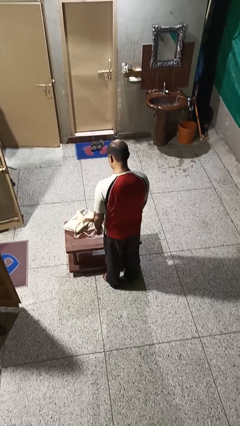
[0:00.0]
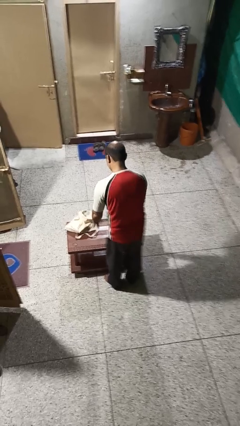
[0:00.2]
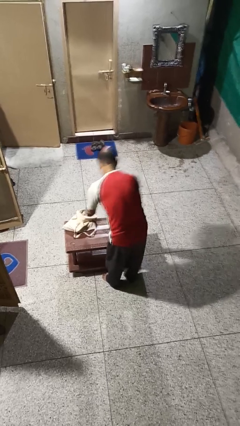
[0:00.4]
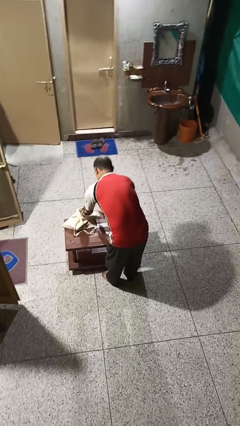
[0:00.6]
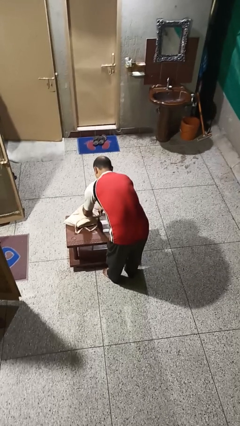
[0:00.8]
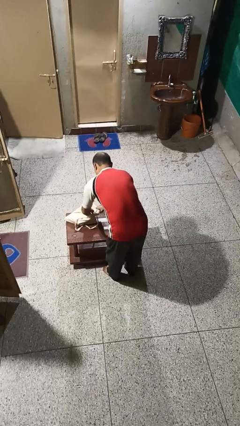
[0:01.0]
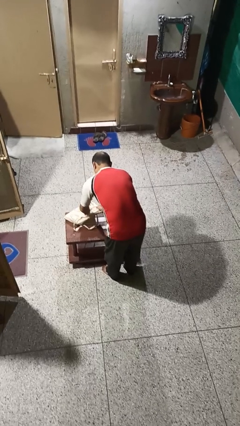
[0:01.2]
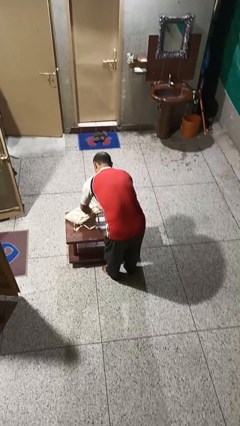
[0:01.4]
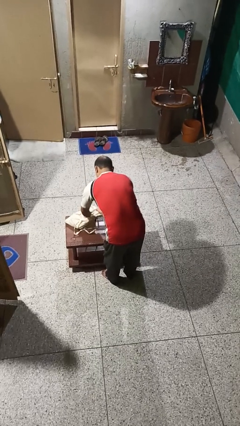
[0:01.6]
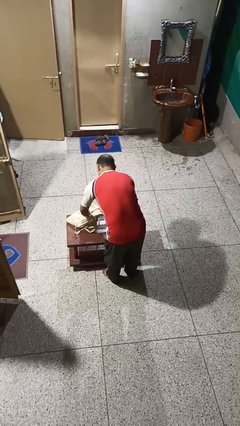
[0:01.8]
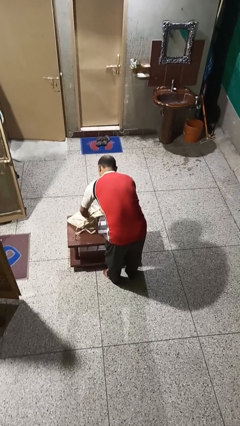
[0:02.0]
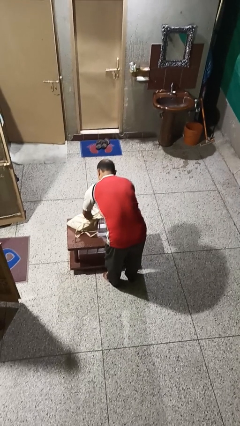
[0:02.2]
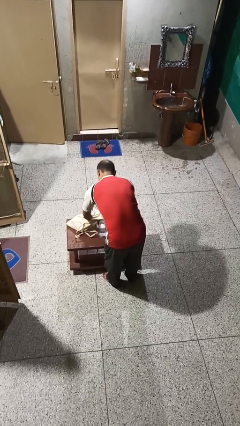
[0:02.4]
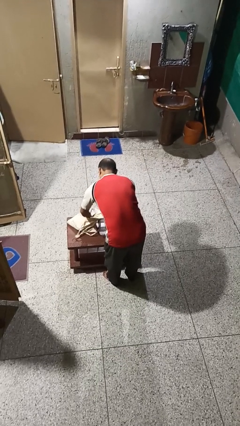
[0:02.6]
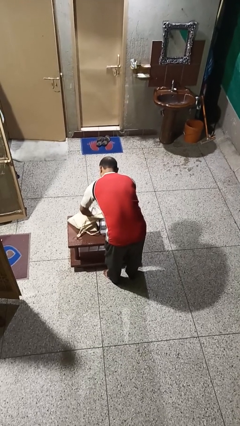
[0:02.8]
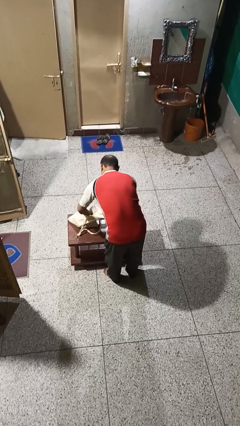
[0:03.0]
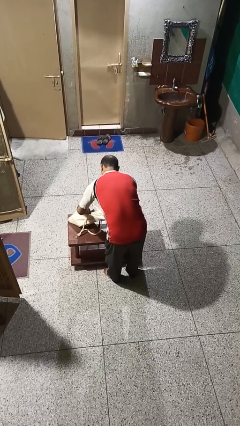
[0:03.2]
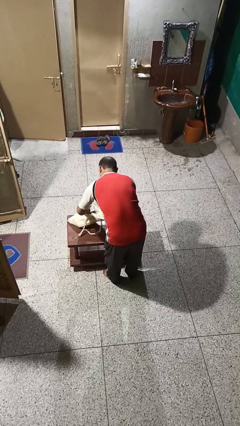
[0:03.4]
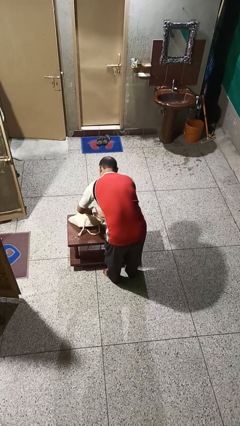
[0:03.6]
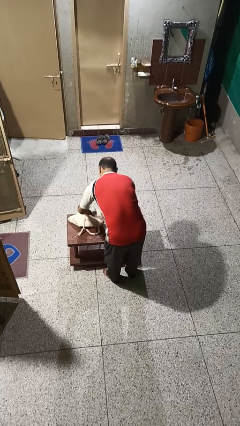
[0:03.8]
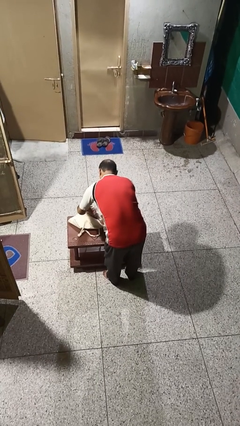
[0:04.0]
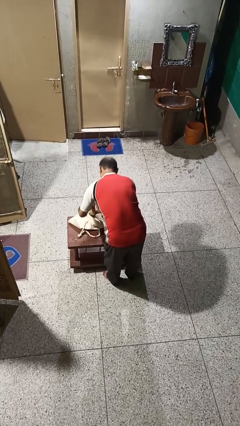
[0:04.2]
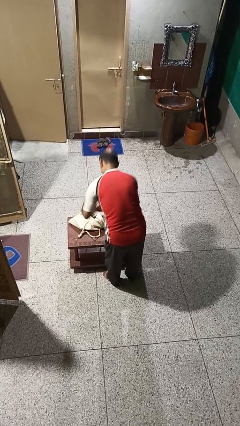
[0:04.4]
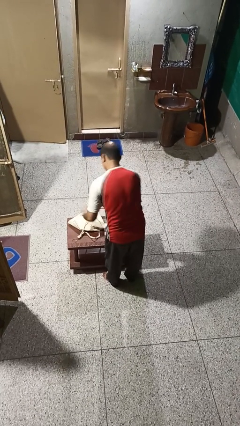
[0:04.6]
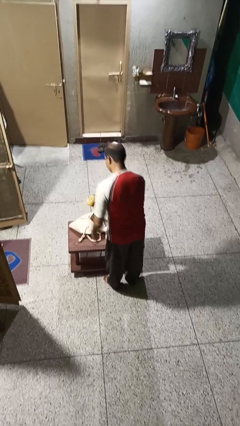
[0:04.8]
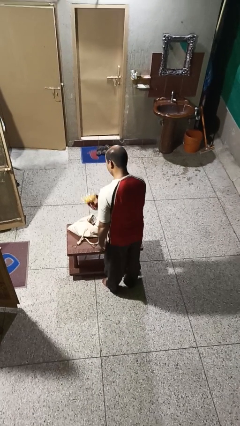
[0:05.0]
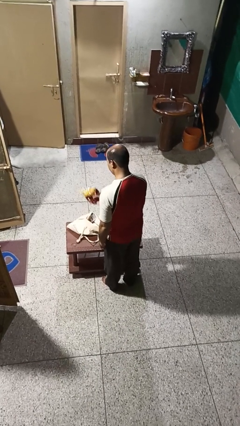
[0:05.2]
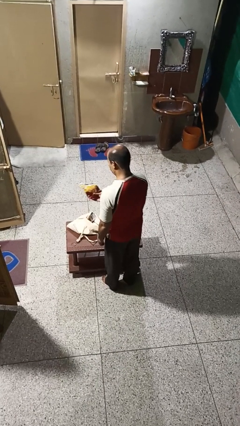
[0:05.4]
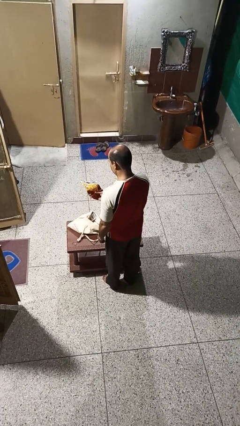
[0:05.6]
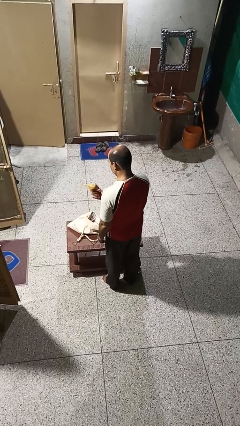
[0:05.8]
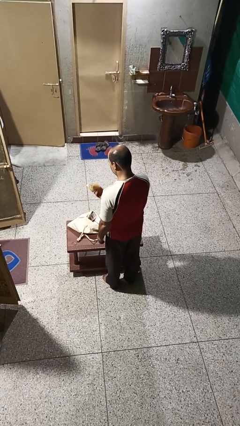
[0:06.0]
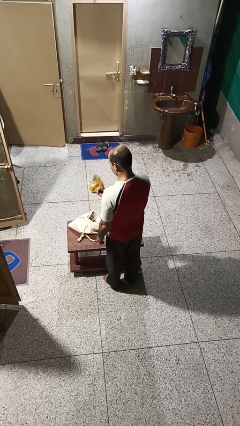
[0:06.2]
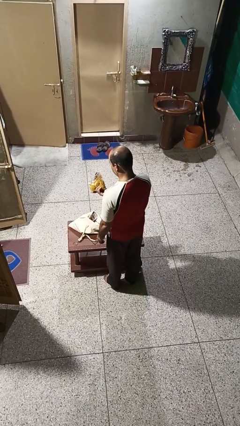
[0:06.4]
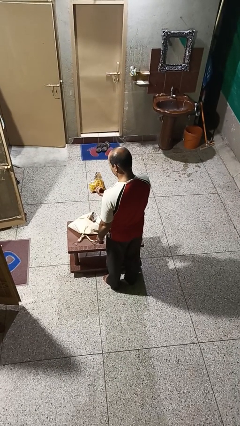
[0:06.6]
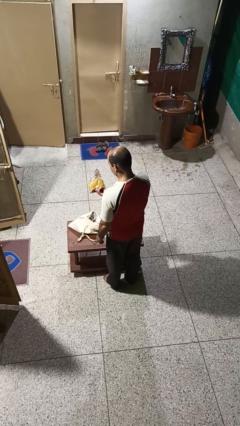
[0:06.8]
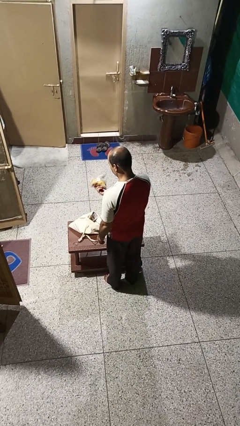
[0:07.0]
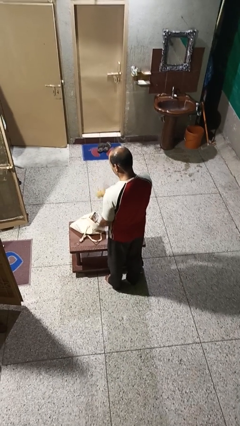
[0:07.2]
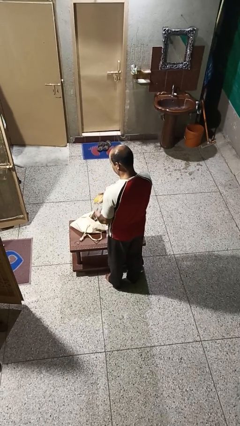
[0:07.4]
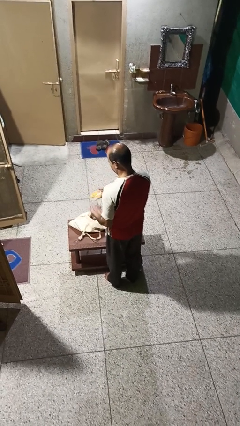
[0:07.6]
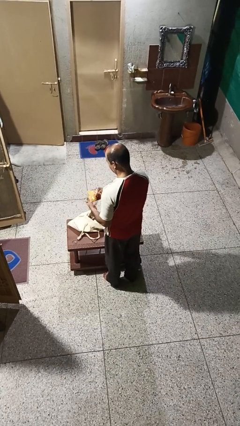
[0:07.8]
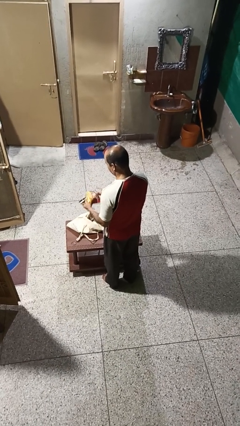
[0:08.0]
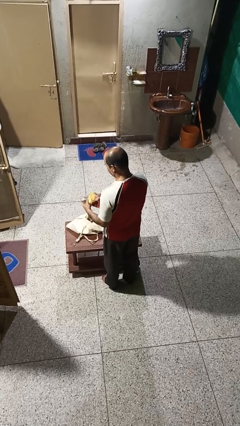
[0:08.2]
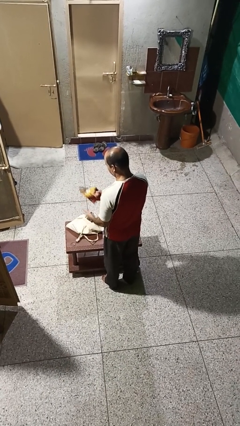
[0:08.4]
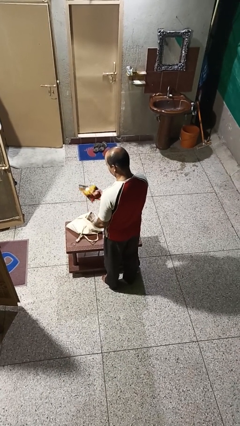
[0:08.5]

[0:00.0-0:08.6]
person takes object from bag

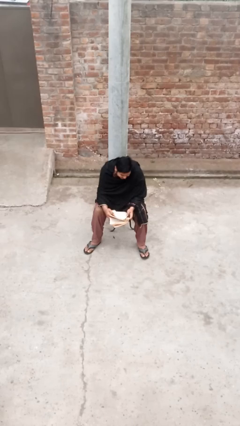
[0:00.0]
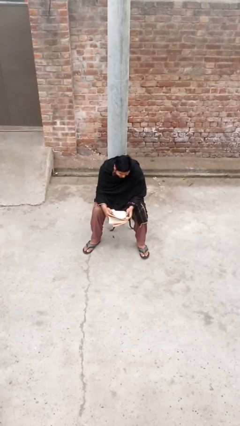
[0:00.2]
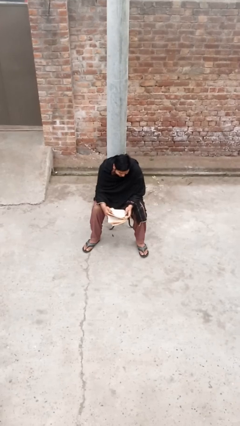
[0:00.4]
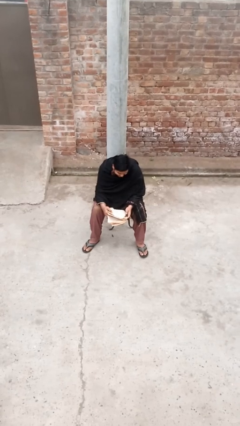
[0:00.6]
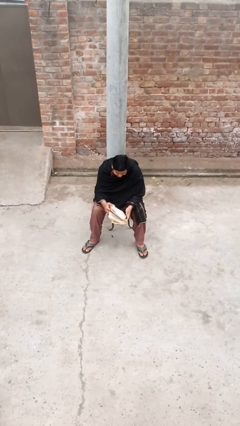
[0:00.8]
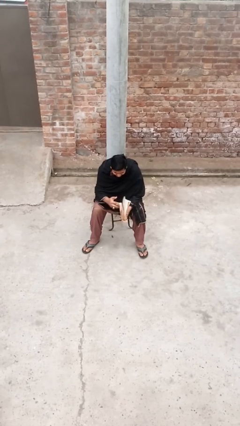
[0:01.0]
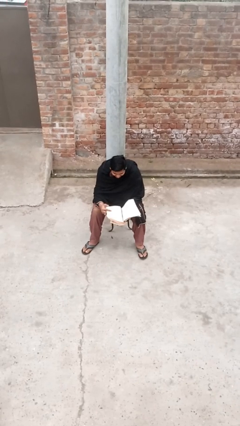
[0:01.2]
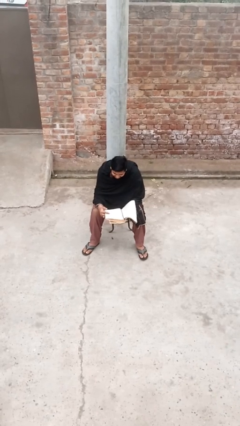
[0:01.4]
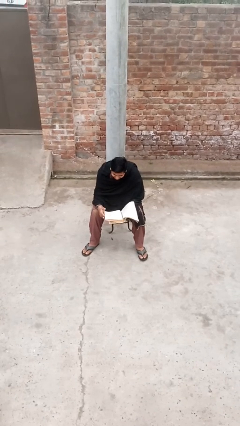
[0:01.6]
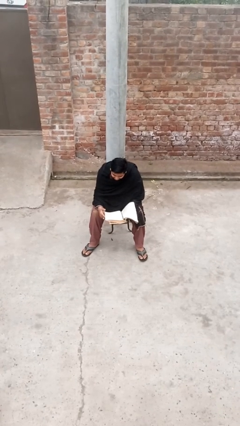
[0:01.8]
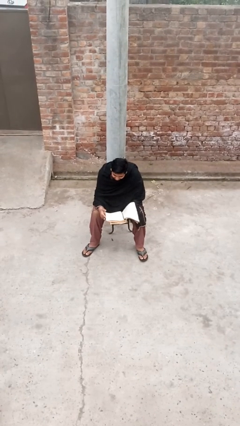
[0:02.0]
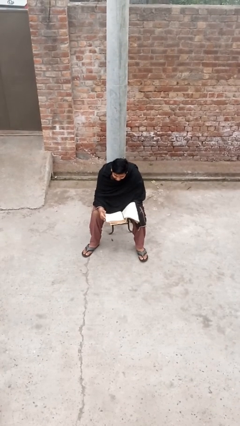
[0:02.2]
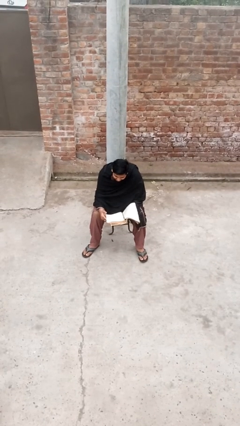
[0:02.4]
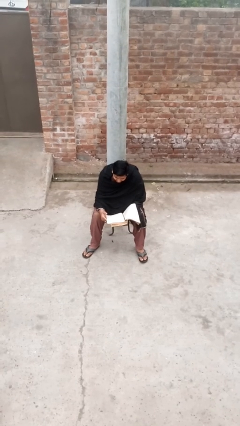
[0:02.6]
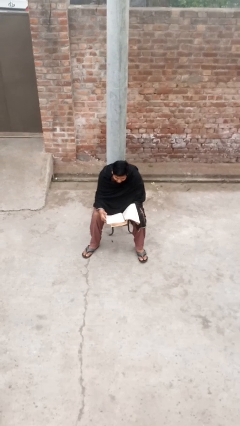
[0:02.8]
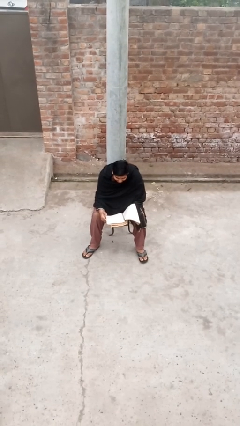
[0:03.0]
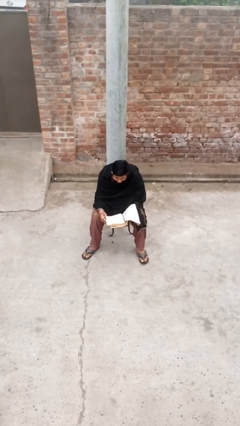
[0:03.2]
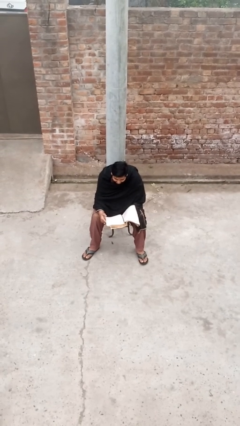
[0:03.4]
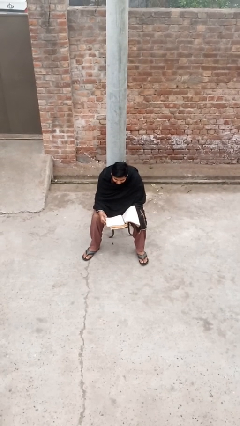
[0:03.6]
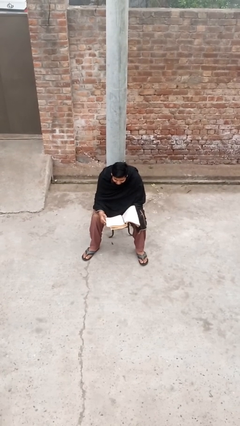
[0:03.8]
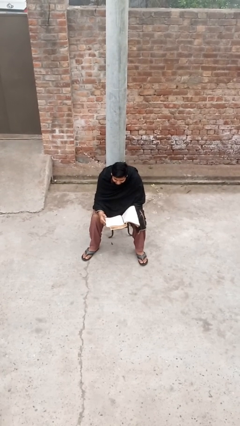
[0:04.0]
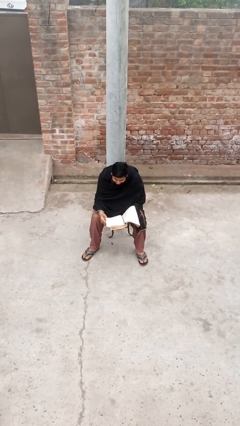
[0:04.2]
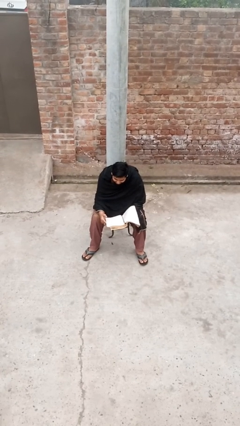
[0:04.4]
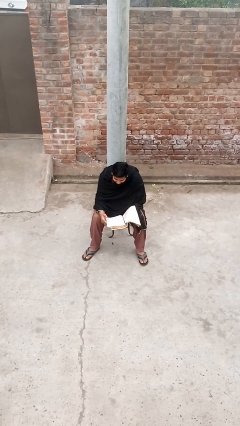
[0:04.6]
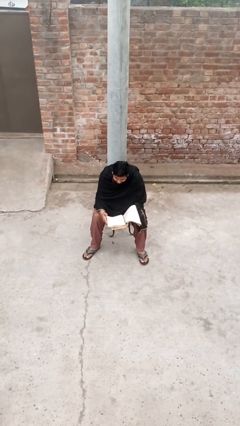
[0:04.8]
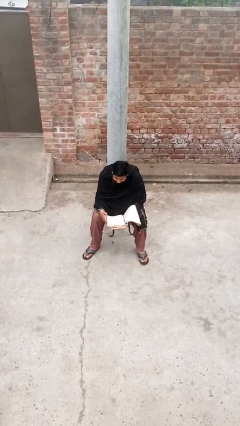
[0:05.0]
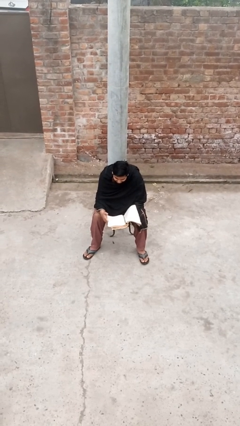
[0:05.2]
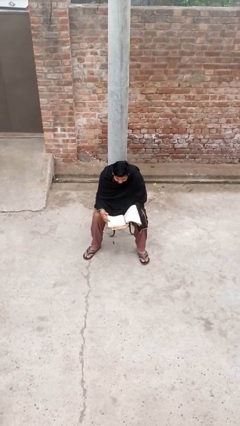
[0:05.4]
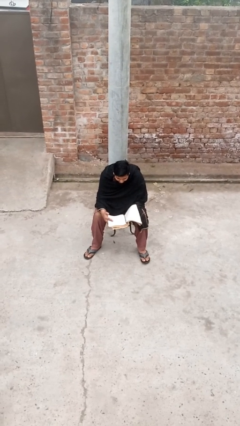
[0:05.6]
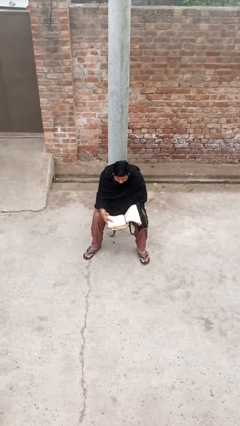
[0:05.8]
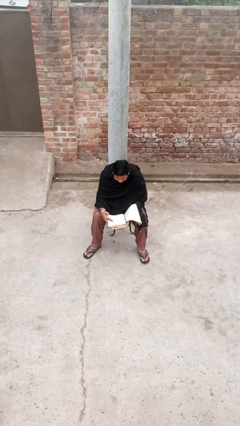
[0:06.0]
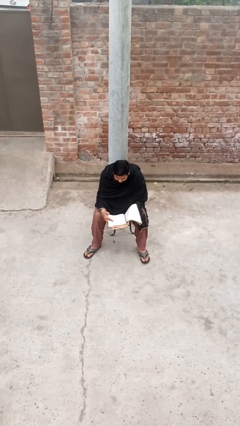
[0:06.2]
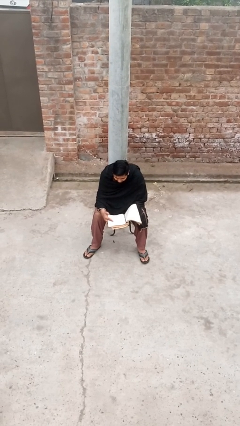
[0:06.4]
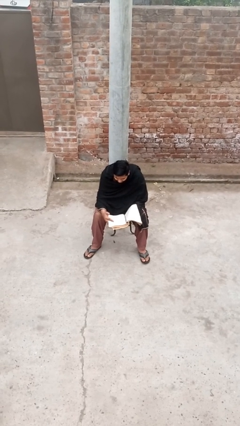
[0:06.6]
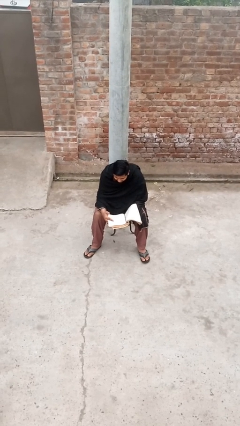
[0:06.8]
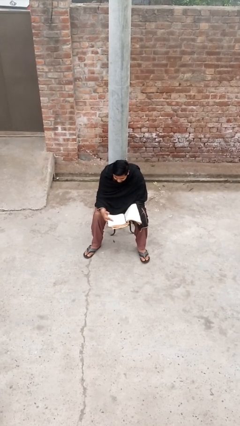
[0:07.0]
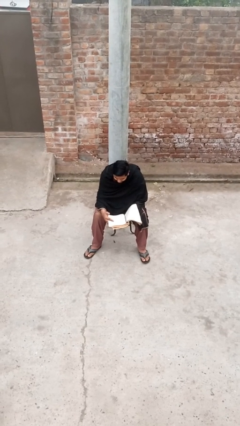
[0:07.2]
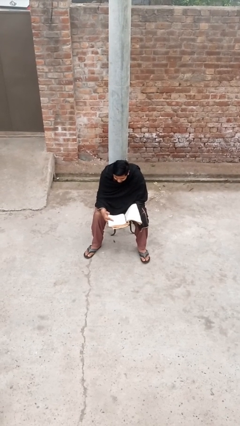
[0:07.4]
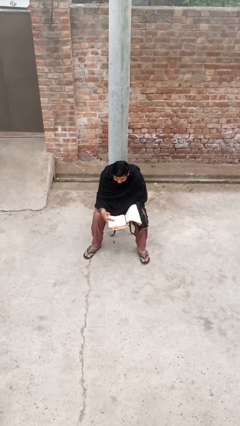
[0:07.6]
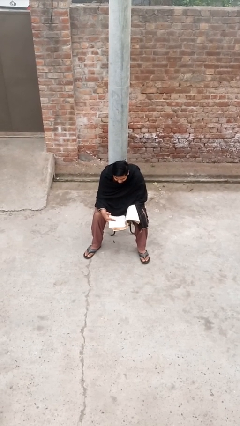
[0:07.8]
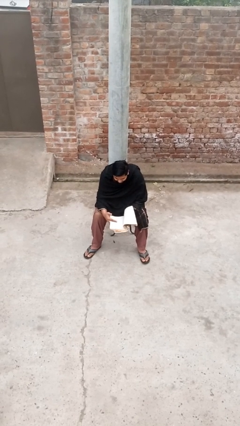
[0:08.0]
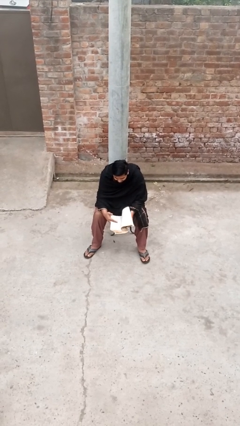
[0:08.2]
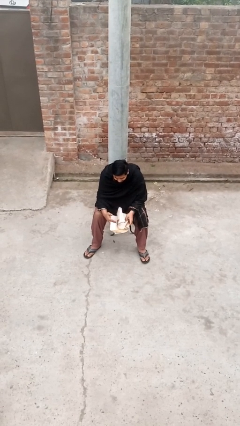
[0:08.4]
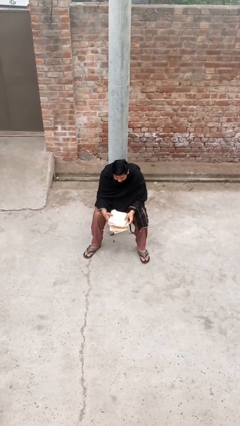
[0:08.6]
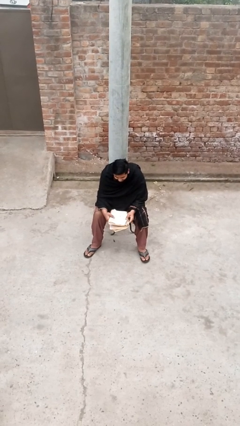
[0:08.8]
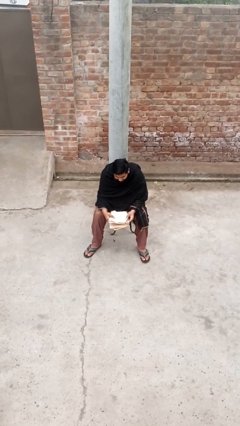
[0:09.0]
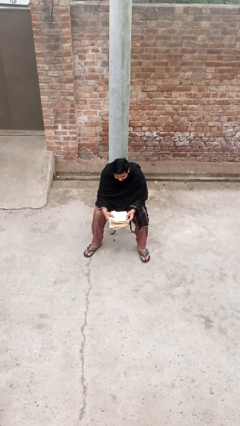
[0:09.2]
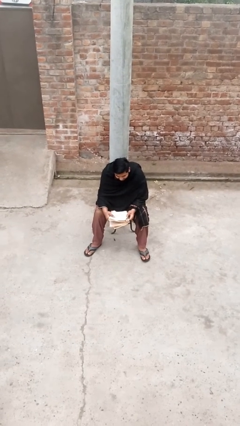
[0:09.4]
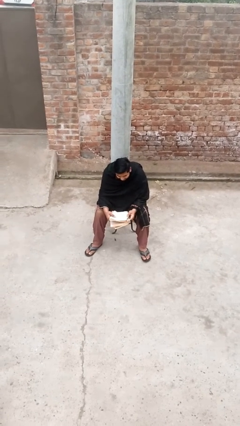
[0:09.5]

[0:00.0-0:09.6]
person reads document
